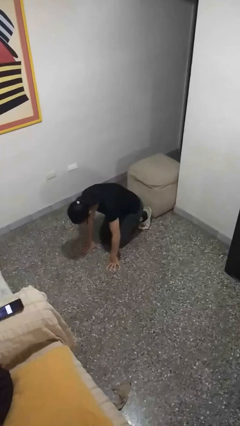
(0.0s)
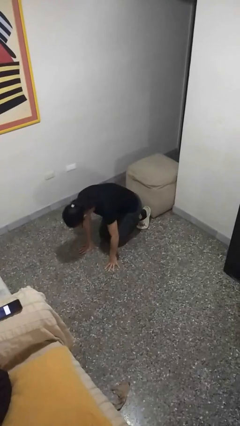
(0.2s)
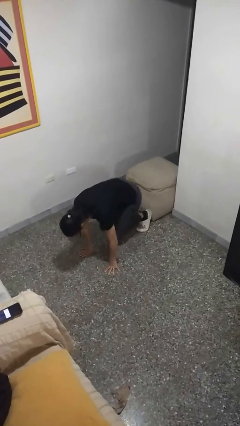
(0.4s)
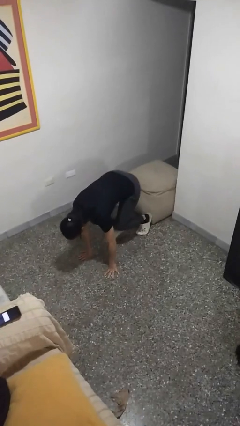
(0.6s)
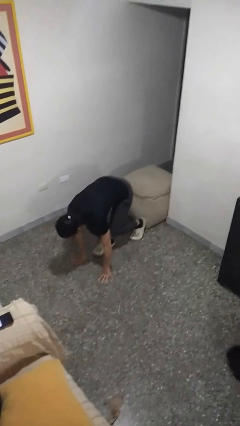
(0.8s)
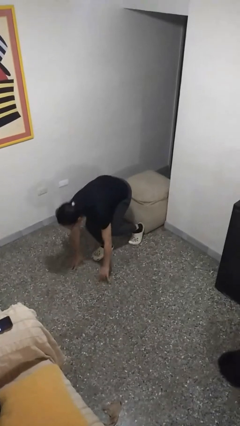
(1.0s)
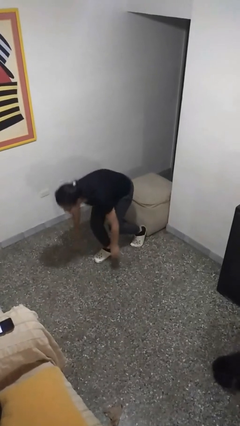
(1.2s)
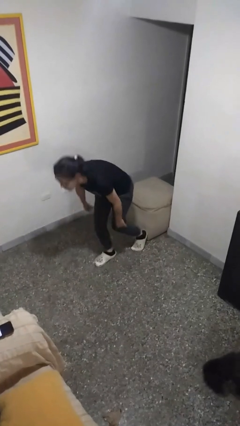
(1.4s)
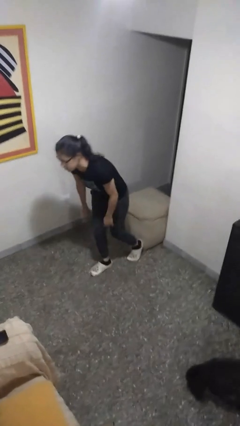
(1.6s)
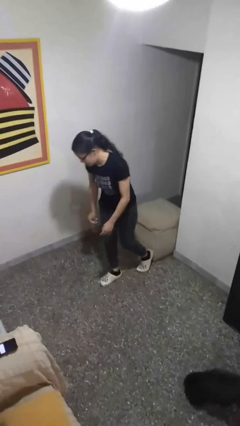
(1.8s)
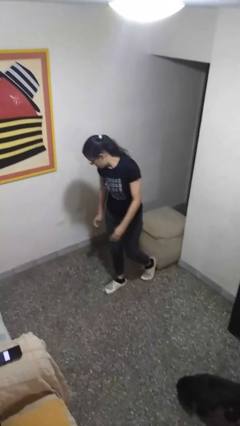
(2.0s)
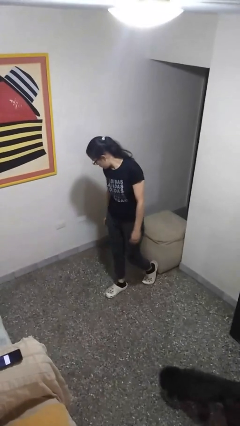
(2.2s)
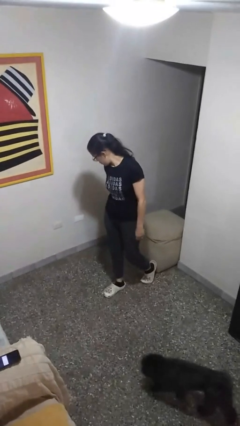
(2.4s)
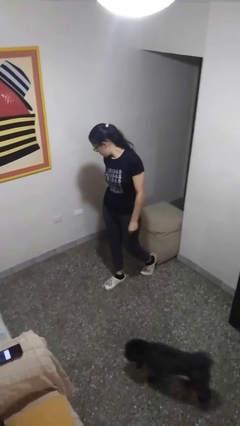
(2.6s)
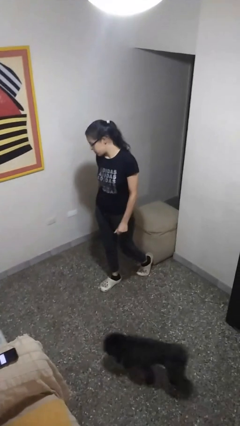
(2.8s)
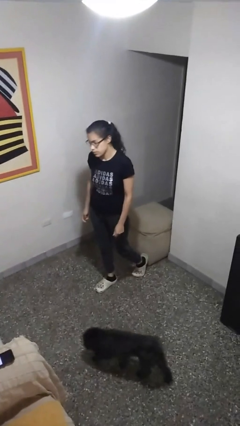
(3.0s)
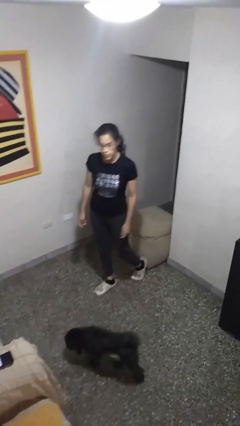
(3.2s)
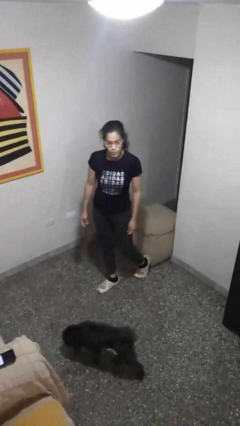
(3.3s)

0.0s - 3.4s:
person stands up from floor

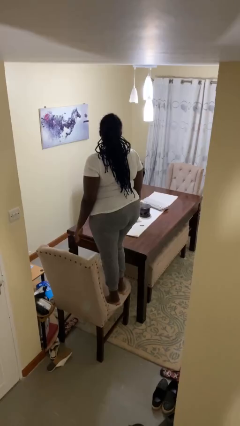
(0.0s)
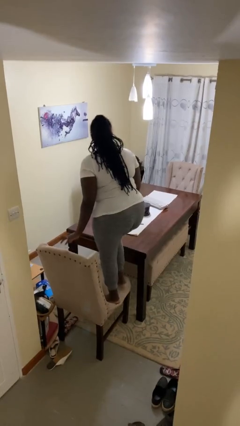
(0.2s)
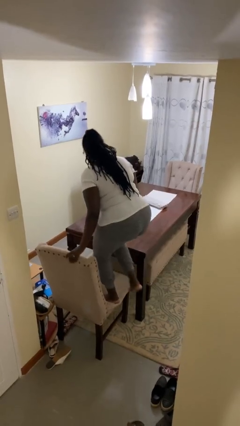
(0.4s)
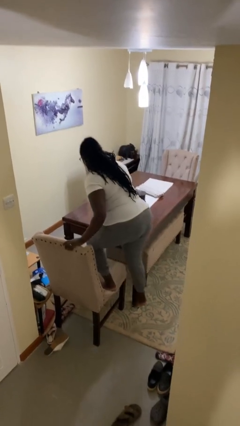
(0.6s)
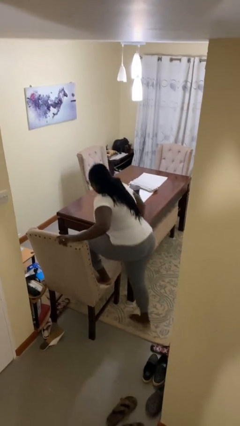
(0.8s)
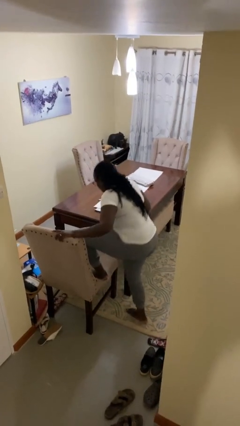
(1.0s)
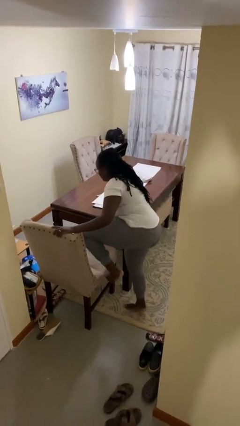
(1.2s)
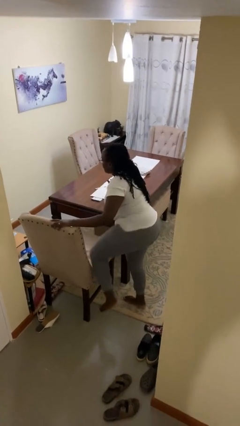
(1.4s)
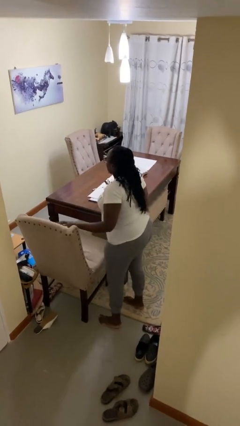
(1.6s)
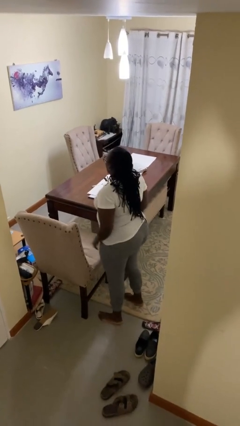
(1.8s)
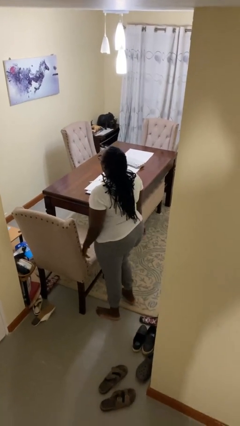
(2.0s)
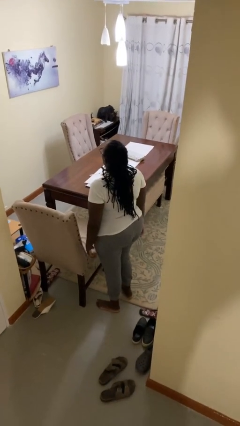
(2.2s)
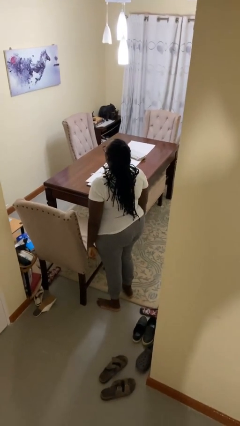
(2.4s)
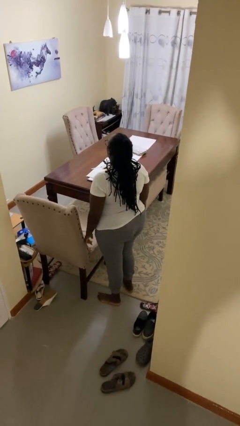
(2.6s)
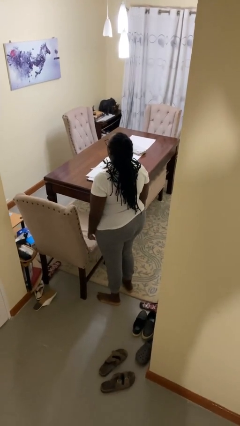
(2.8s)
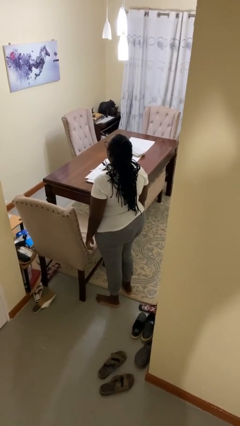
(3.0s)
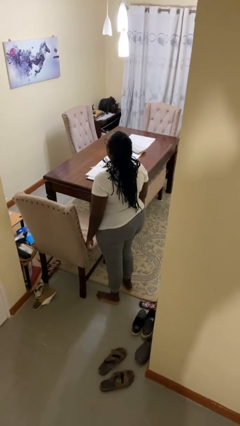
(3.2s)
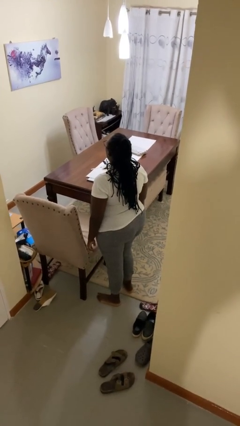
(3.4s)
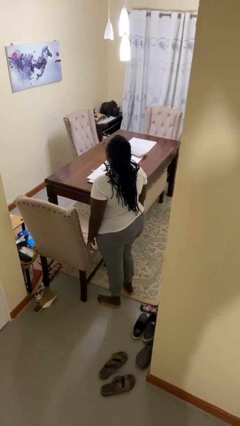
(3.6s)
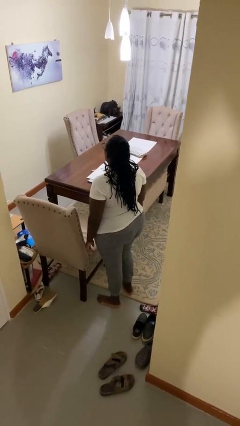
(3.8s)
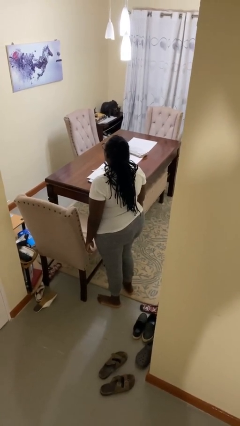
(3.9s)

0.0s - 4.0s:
person climbs off chair

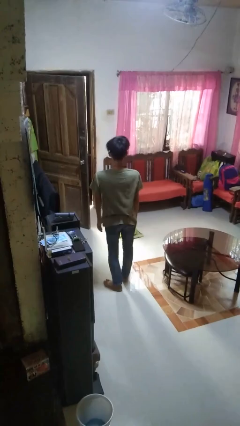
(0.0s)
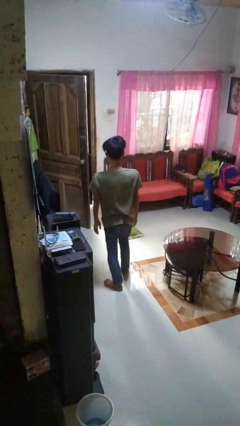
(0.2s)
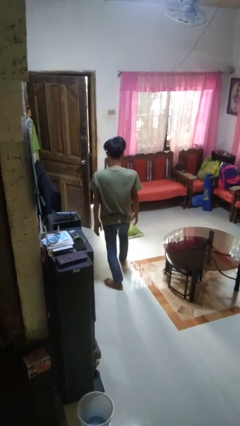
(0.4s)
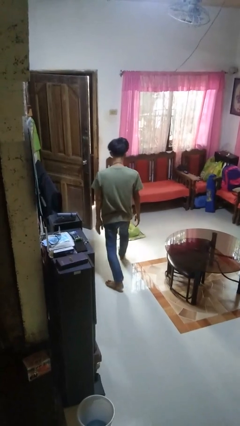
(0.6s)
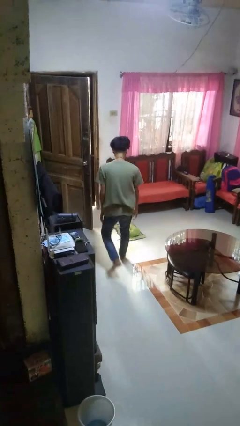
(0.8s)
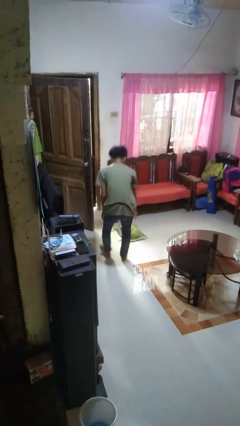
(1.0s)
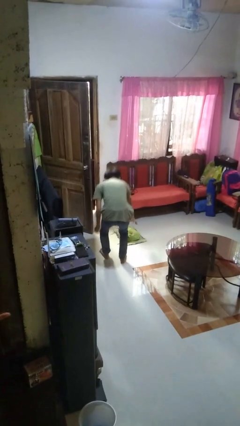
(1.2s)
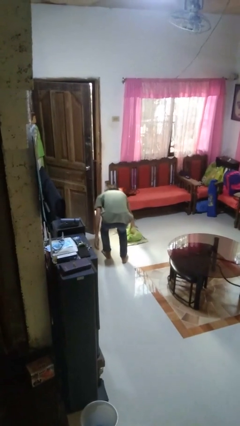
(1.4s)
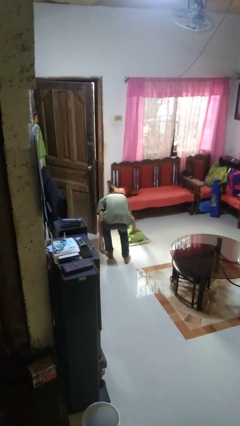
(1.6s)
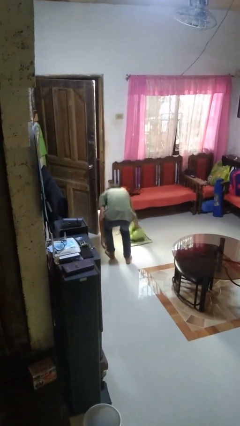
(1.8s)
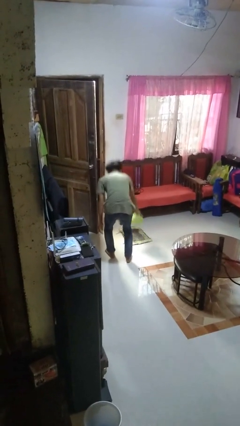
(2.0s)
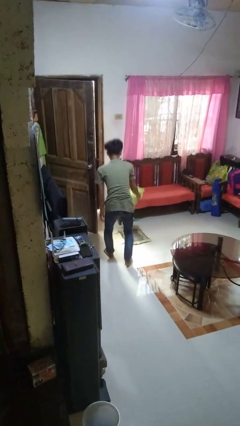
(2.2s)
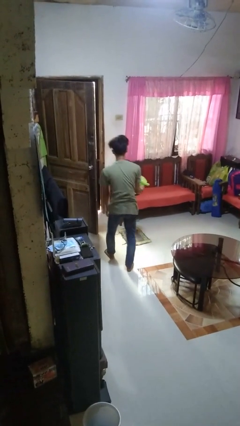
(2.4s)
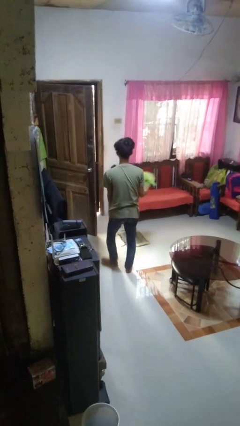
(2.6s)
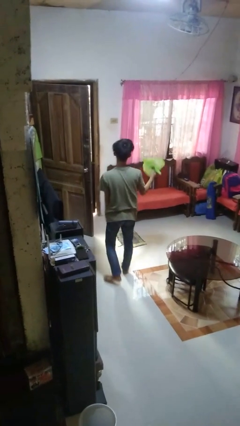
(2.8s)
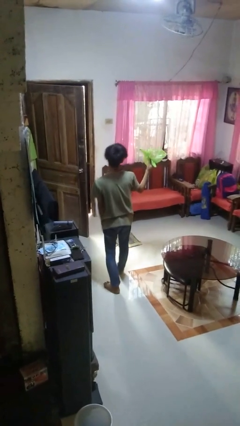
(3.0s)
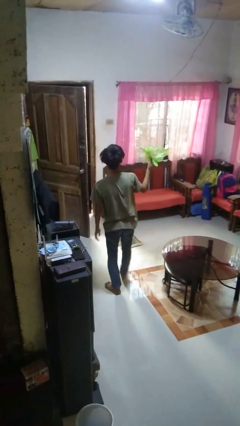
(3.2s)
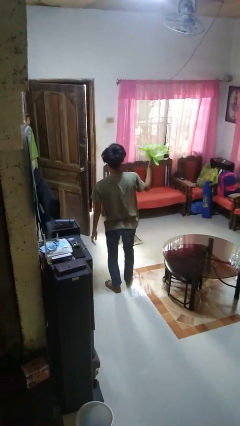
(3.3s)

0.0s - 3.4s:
person picks up object from floor

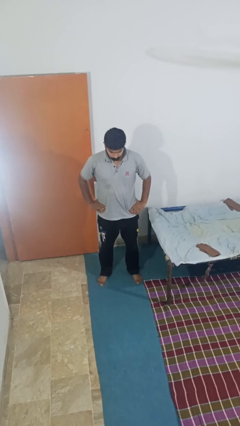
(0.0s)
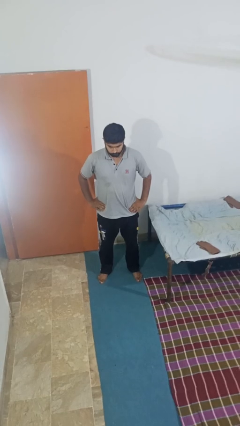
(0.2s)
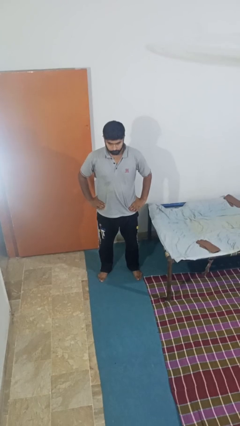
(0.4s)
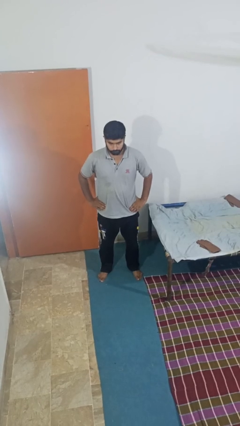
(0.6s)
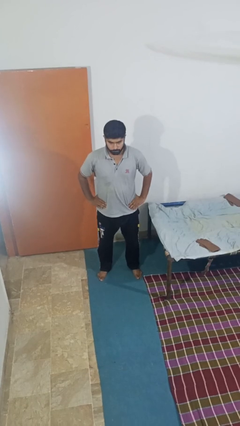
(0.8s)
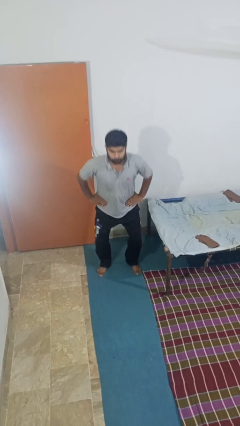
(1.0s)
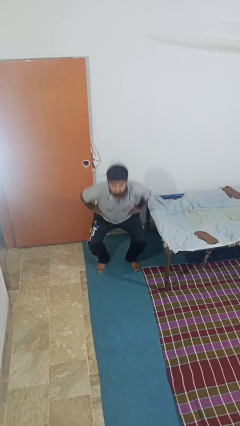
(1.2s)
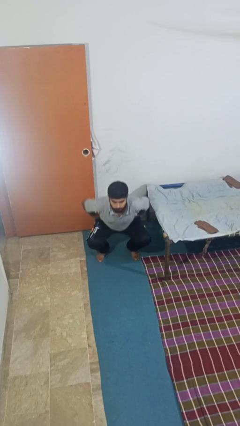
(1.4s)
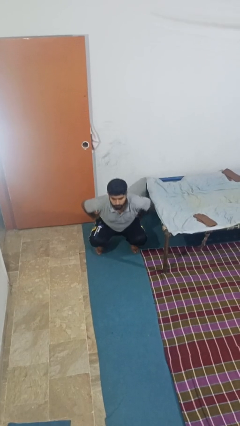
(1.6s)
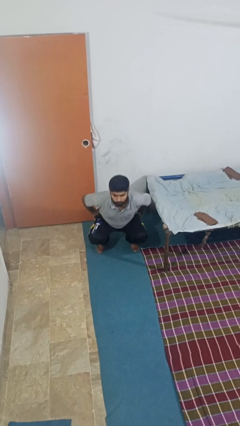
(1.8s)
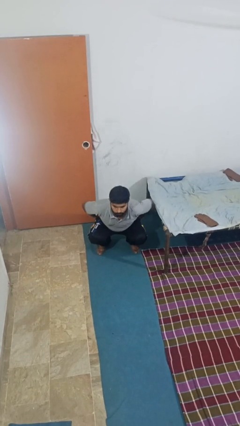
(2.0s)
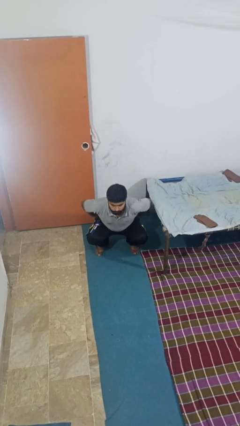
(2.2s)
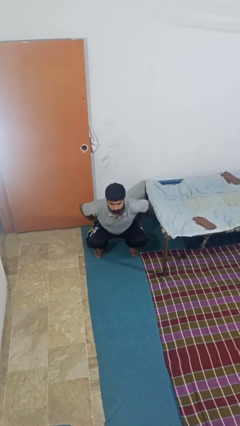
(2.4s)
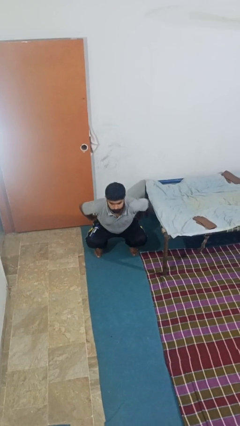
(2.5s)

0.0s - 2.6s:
person squats

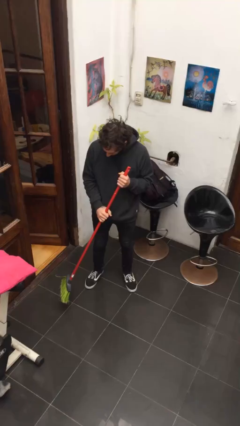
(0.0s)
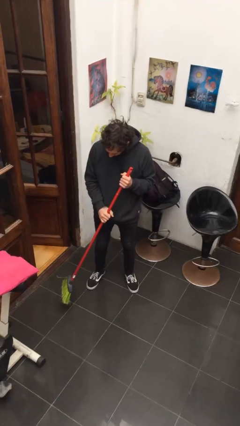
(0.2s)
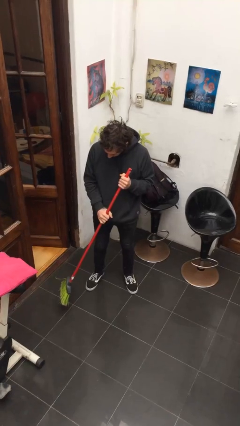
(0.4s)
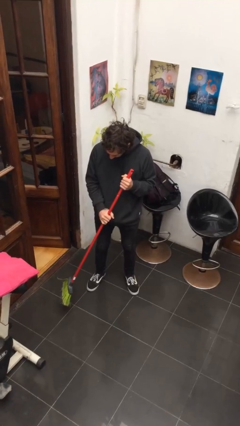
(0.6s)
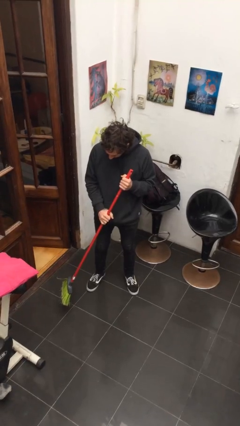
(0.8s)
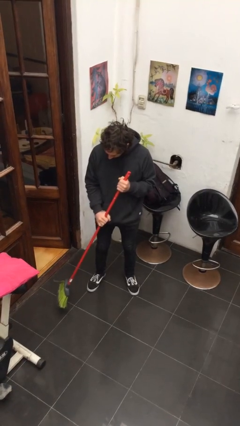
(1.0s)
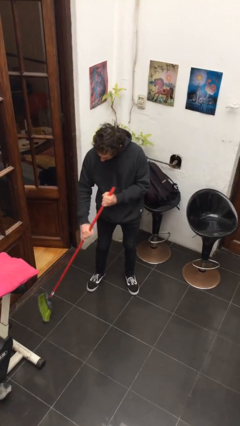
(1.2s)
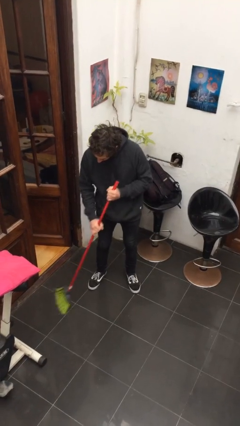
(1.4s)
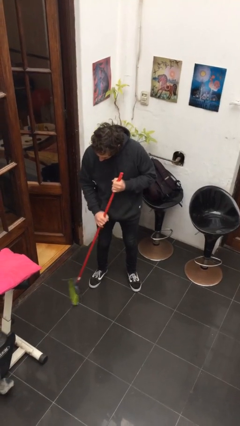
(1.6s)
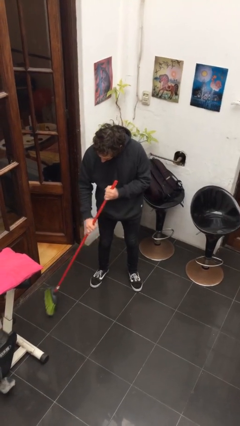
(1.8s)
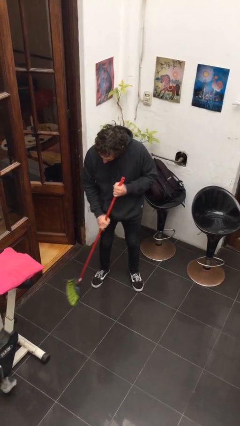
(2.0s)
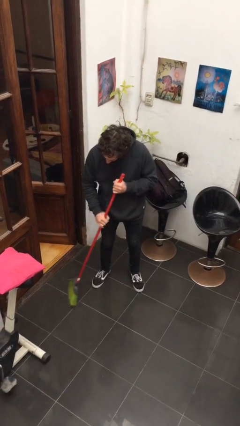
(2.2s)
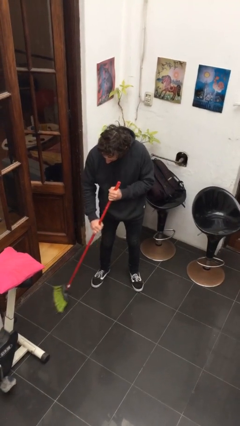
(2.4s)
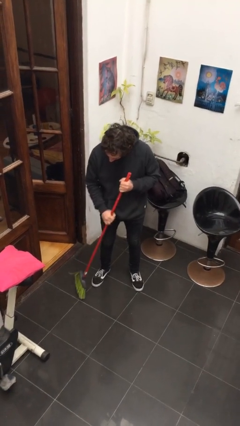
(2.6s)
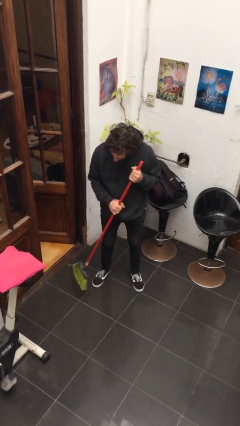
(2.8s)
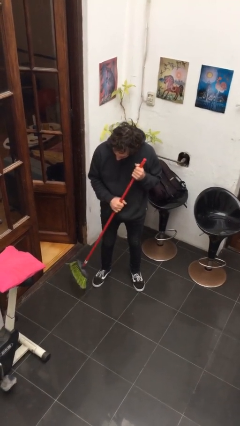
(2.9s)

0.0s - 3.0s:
person sweeps floor

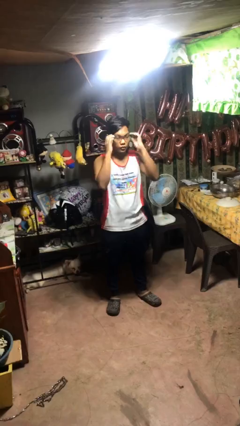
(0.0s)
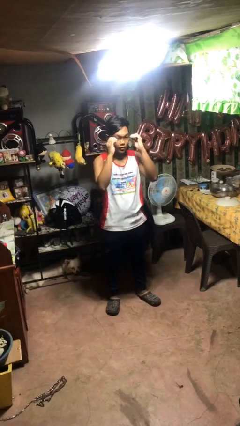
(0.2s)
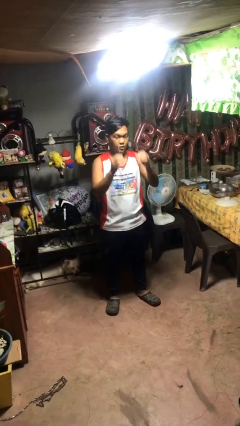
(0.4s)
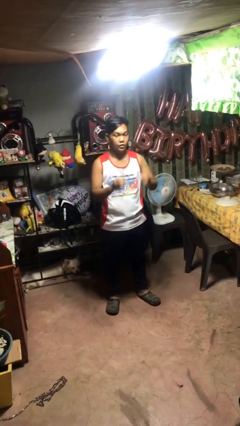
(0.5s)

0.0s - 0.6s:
person takes off glasses

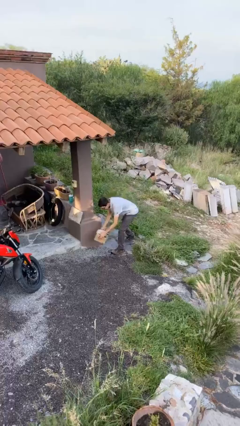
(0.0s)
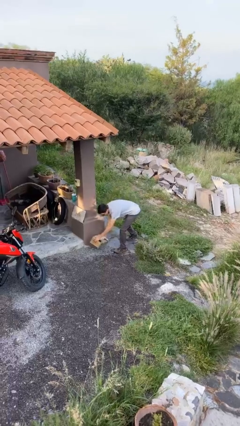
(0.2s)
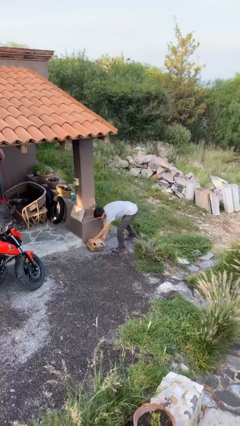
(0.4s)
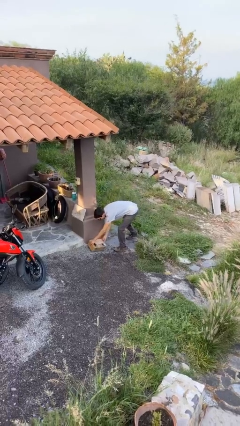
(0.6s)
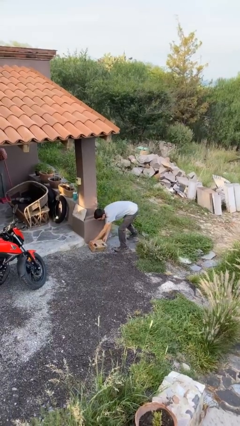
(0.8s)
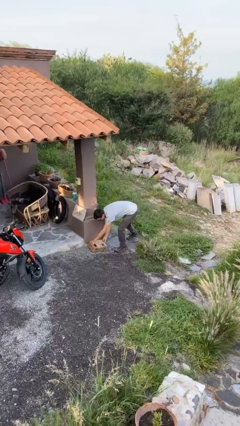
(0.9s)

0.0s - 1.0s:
person puts down object on floor
